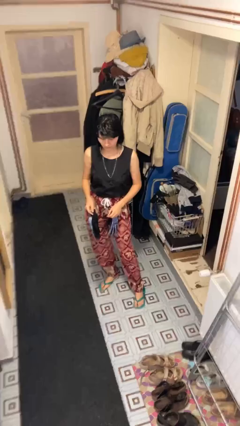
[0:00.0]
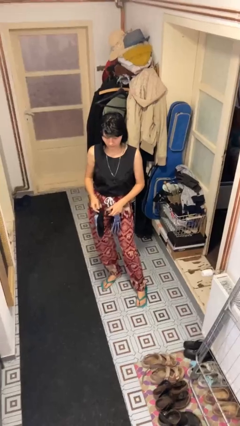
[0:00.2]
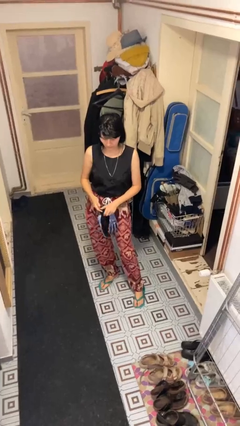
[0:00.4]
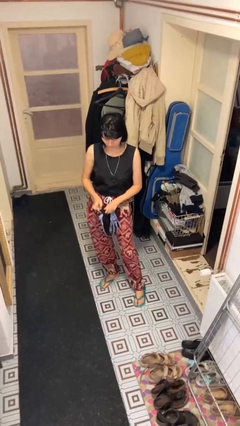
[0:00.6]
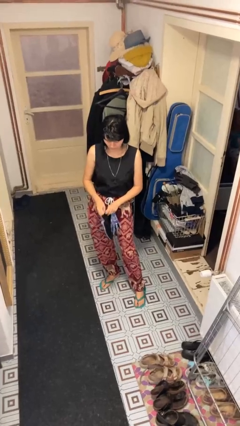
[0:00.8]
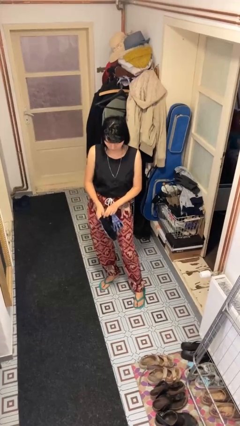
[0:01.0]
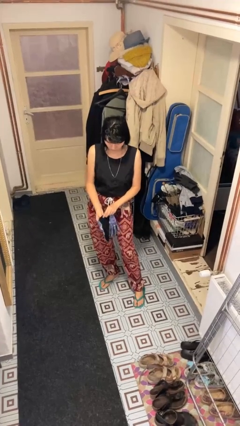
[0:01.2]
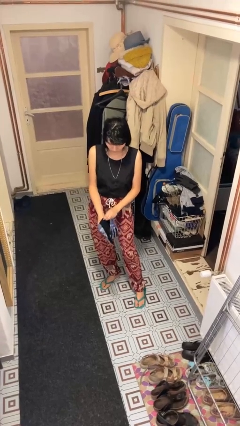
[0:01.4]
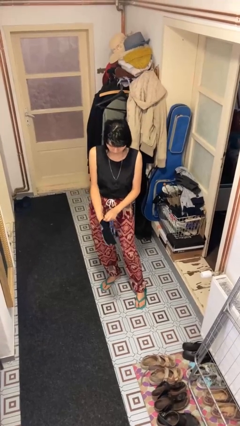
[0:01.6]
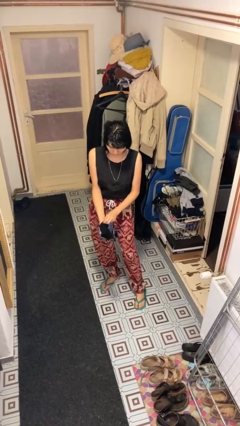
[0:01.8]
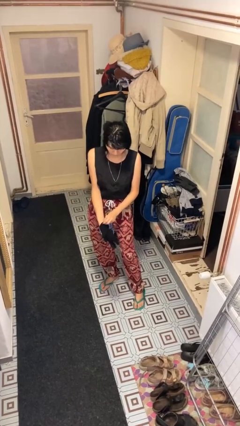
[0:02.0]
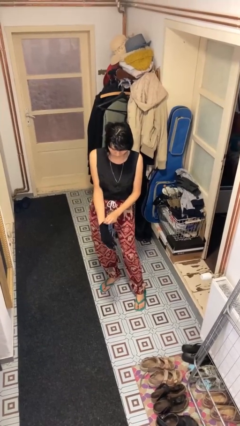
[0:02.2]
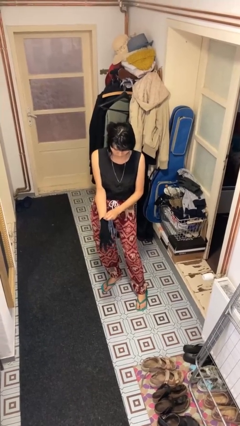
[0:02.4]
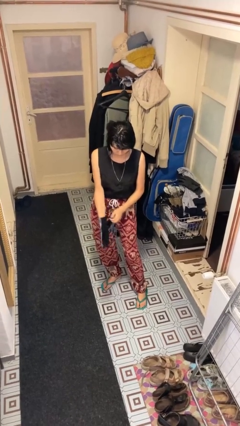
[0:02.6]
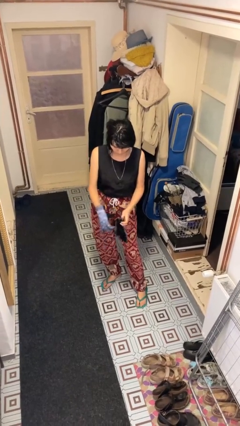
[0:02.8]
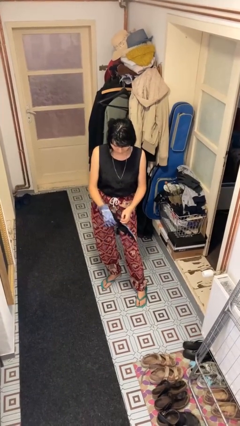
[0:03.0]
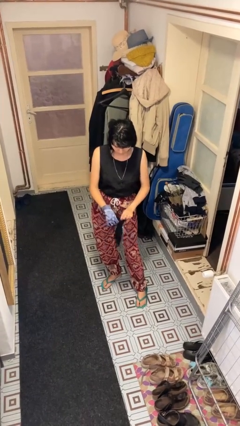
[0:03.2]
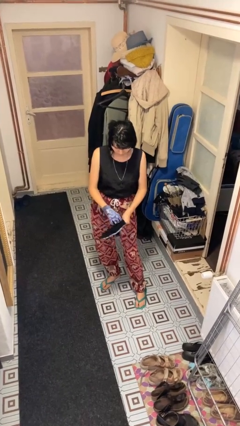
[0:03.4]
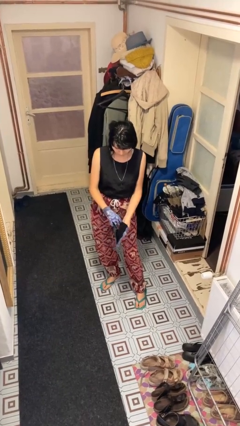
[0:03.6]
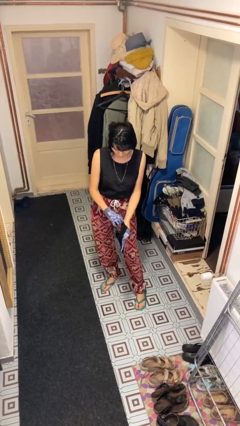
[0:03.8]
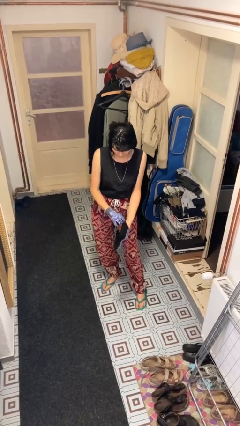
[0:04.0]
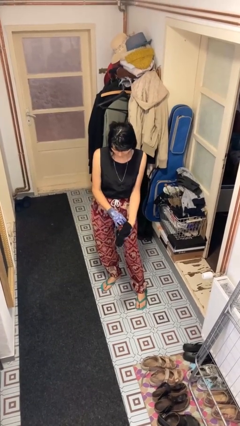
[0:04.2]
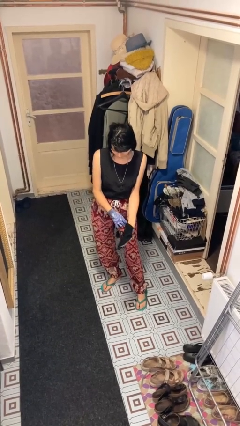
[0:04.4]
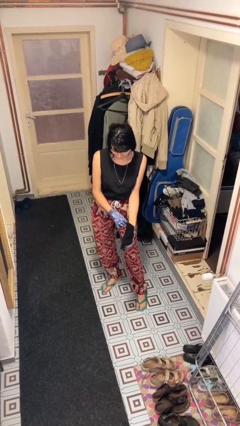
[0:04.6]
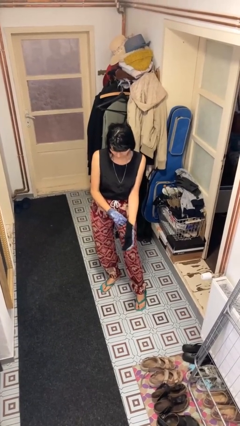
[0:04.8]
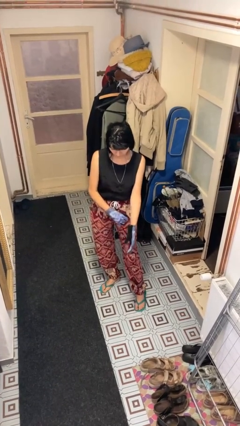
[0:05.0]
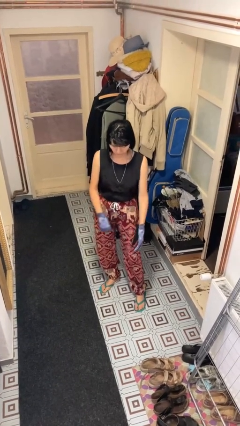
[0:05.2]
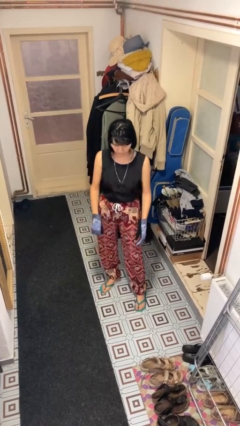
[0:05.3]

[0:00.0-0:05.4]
person puts on gloves

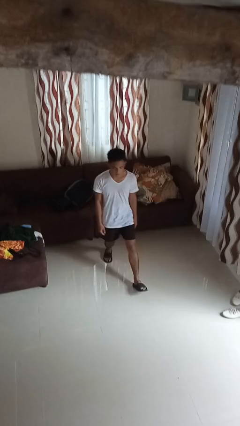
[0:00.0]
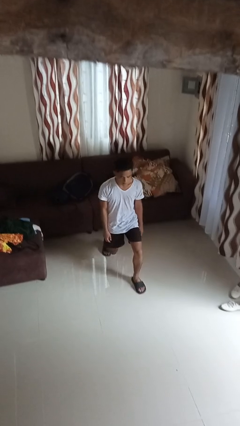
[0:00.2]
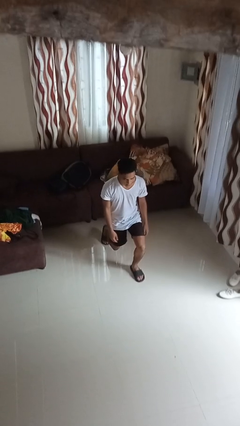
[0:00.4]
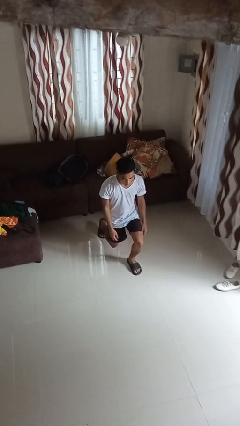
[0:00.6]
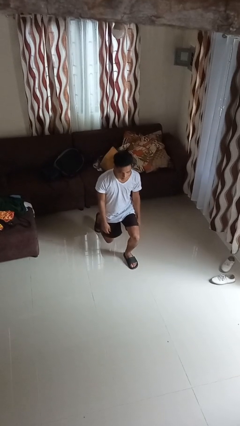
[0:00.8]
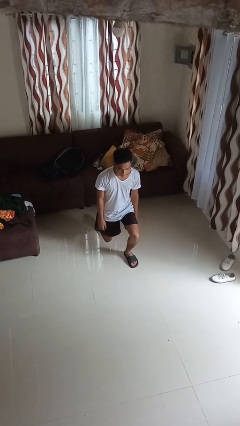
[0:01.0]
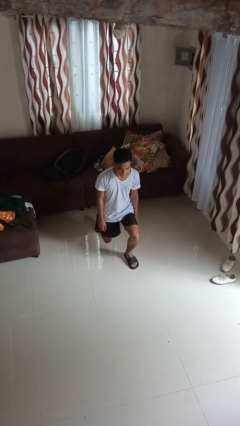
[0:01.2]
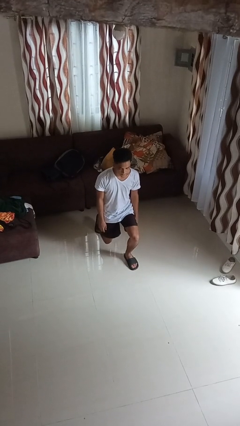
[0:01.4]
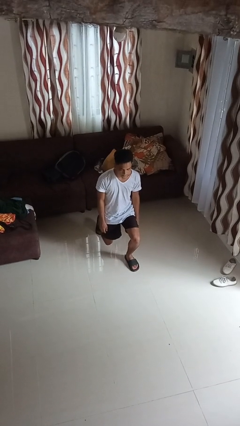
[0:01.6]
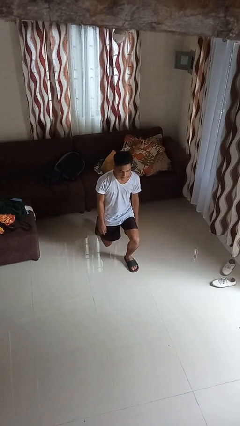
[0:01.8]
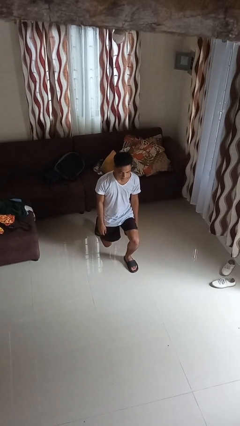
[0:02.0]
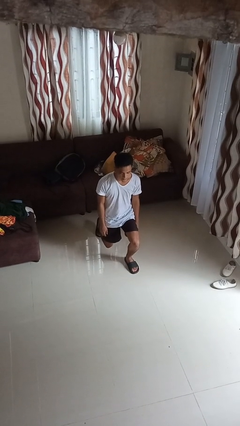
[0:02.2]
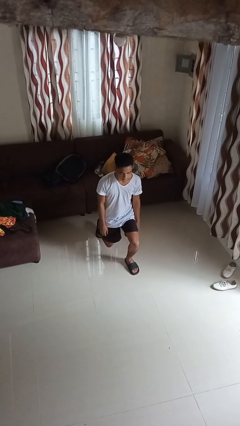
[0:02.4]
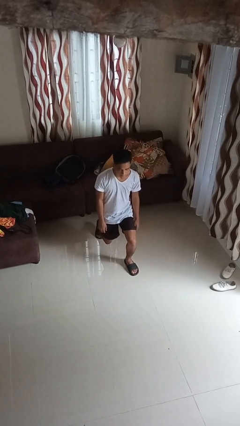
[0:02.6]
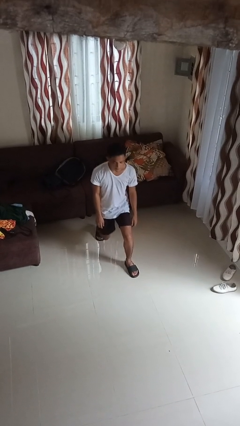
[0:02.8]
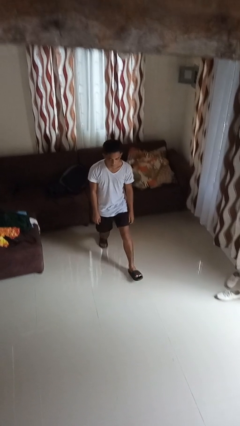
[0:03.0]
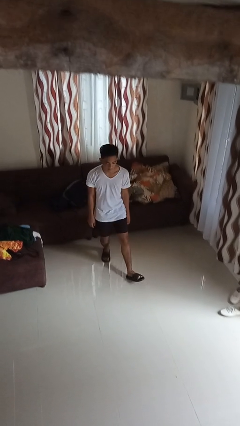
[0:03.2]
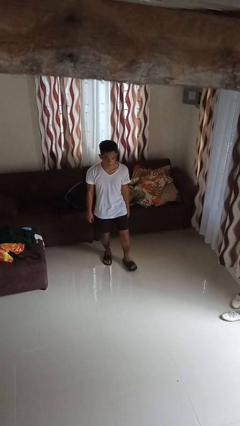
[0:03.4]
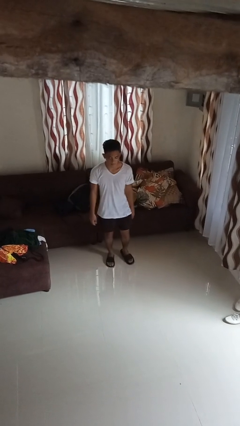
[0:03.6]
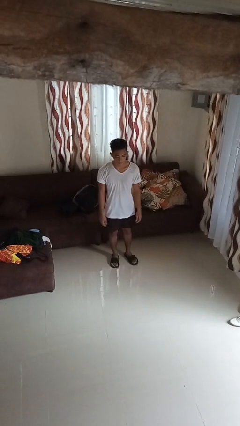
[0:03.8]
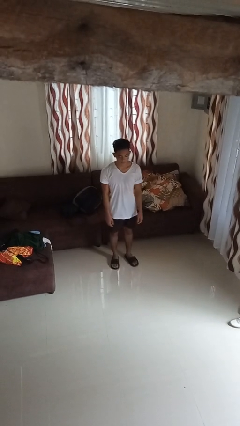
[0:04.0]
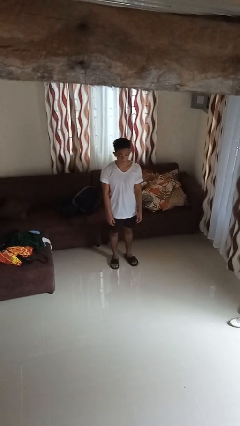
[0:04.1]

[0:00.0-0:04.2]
person exercises with lunges

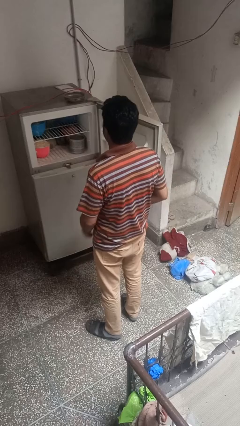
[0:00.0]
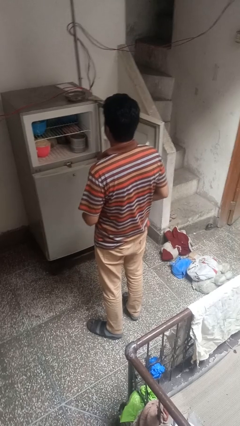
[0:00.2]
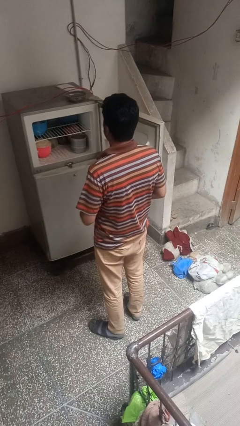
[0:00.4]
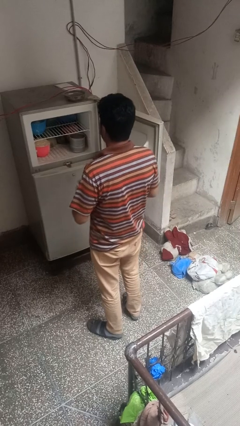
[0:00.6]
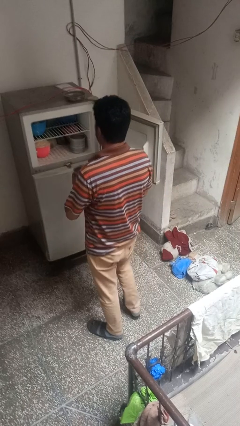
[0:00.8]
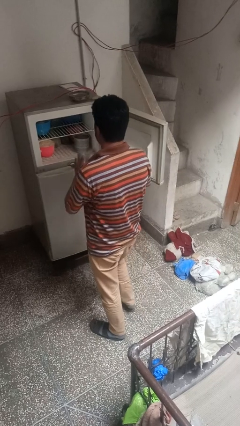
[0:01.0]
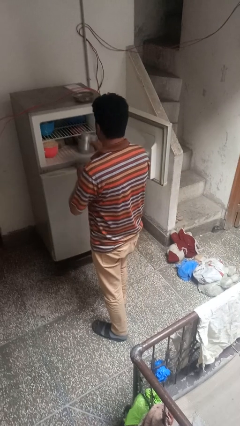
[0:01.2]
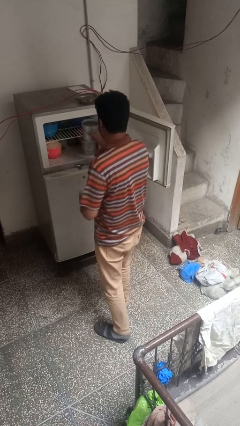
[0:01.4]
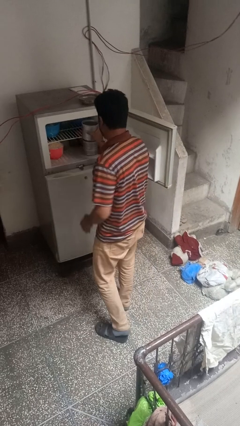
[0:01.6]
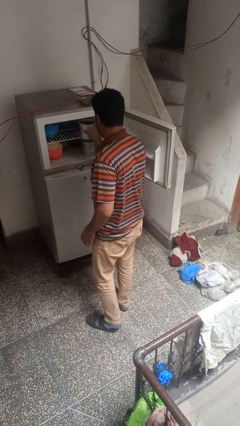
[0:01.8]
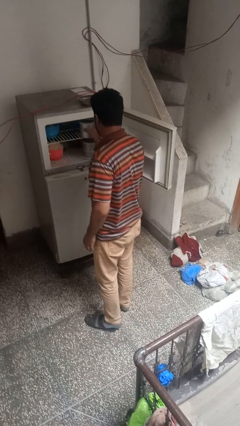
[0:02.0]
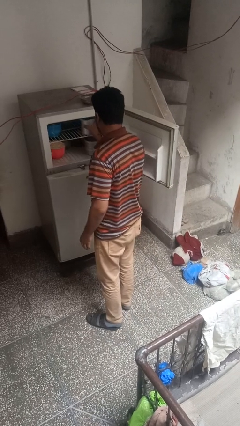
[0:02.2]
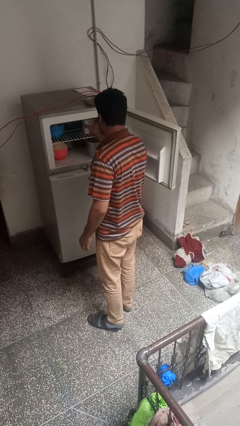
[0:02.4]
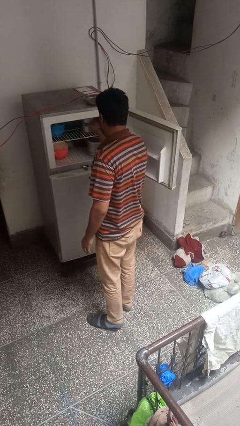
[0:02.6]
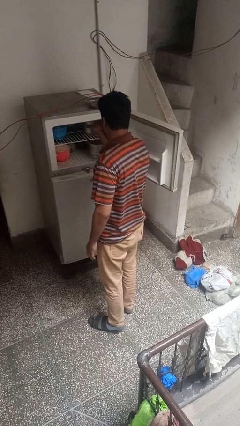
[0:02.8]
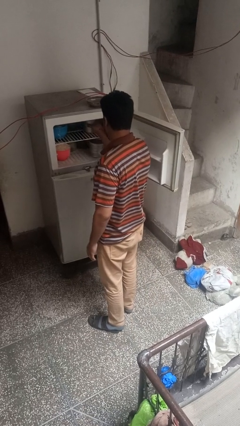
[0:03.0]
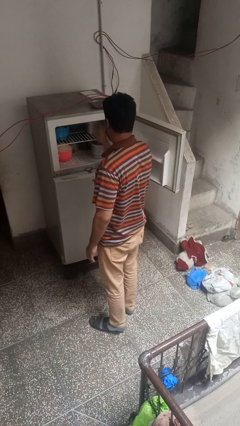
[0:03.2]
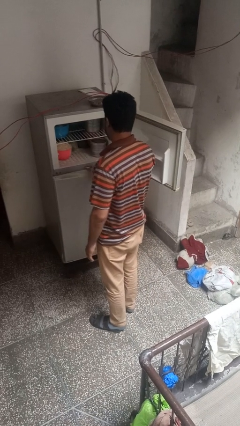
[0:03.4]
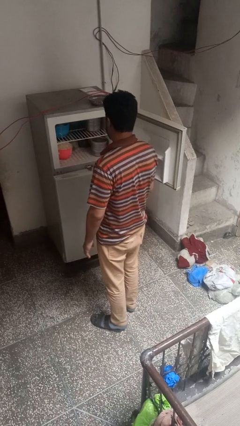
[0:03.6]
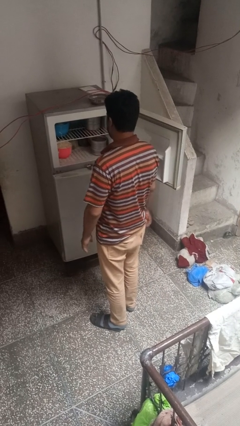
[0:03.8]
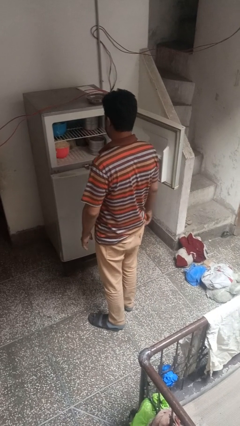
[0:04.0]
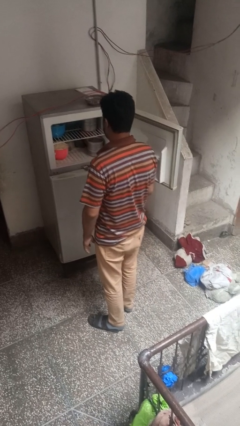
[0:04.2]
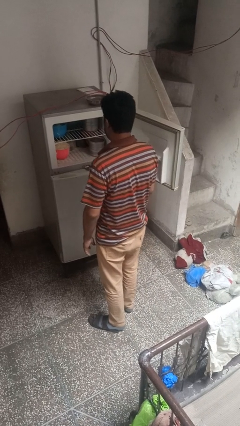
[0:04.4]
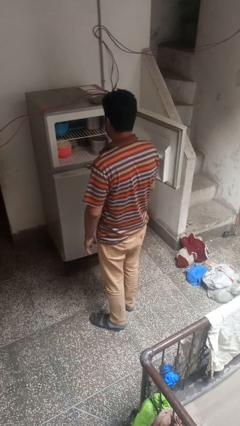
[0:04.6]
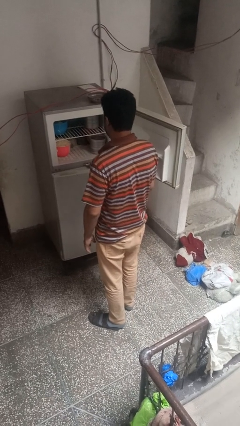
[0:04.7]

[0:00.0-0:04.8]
person puts object into refrigerator

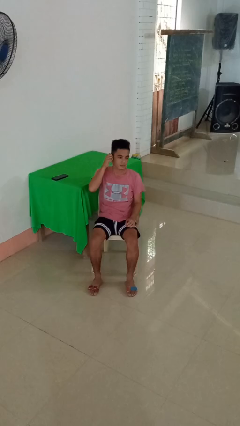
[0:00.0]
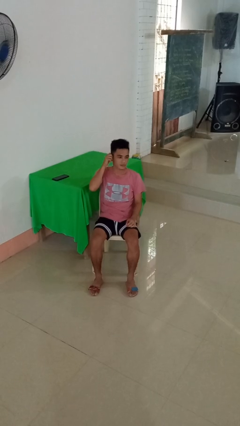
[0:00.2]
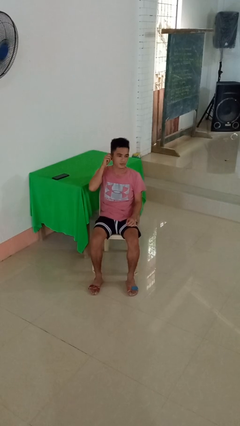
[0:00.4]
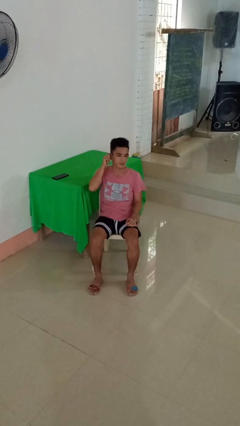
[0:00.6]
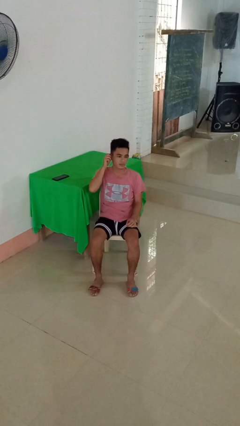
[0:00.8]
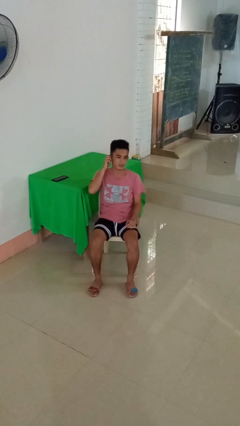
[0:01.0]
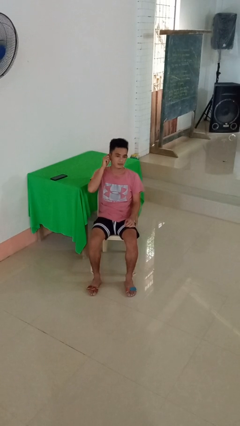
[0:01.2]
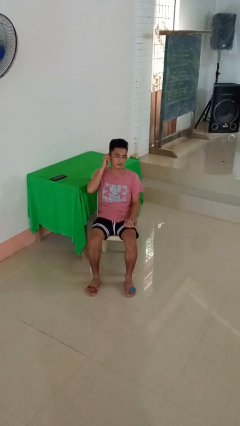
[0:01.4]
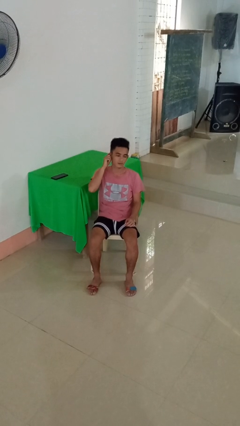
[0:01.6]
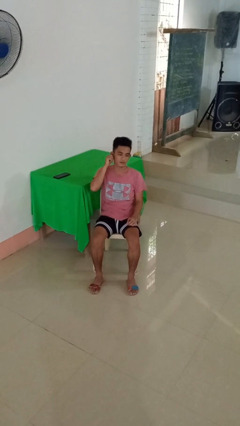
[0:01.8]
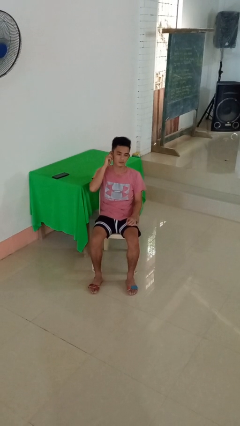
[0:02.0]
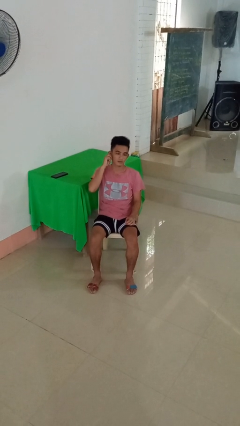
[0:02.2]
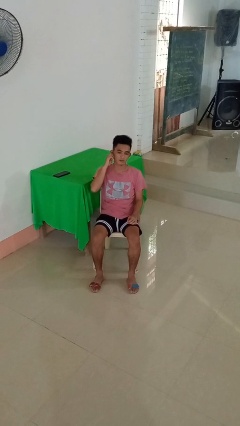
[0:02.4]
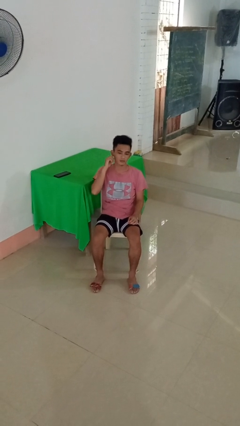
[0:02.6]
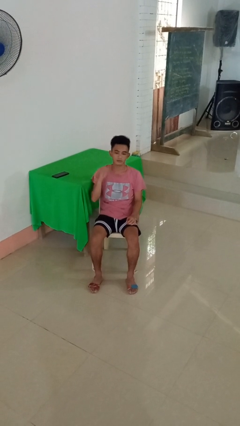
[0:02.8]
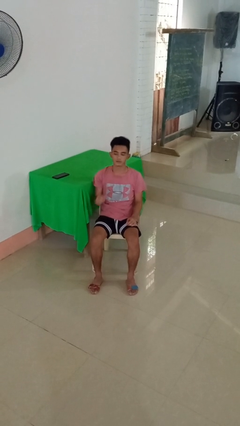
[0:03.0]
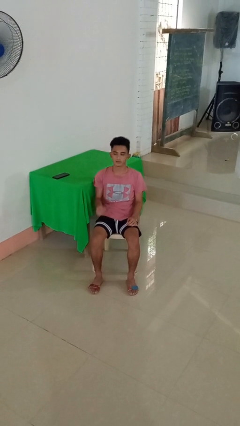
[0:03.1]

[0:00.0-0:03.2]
person touches earlobe

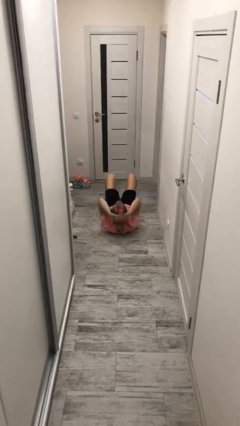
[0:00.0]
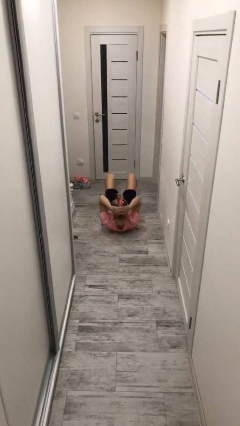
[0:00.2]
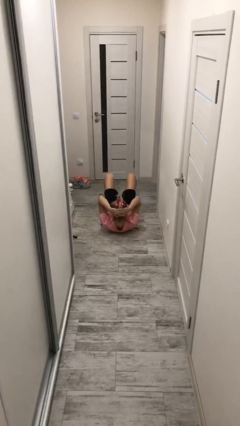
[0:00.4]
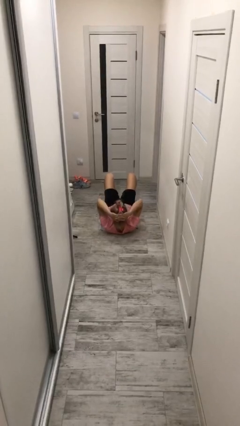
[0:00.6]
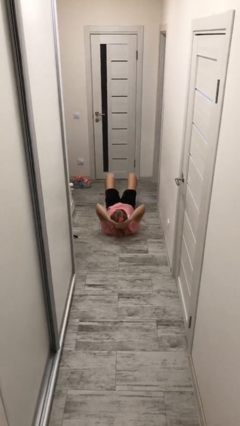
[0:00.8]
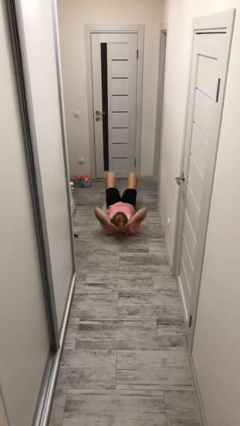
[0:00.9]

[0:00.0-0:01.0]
person exercises with situp
